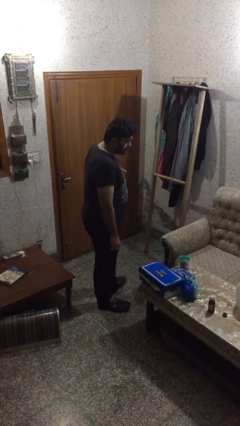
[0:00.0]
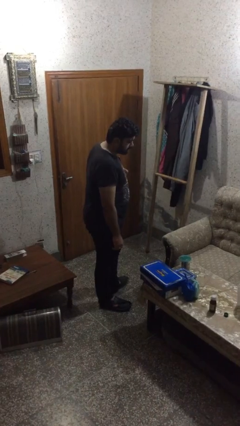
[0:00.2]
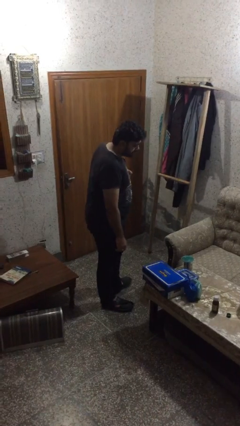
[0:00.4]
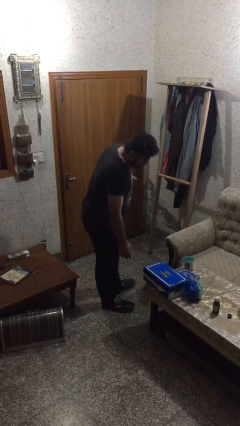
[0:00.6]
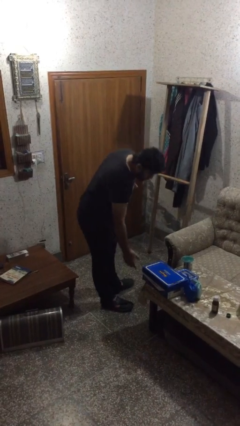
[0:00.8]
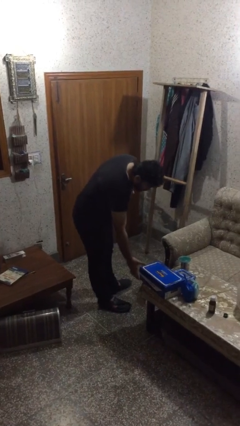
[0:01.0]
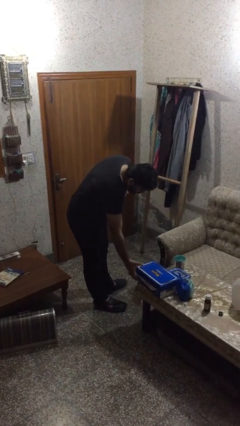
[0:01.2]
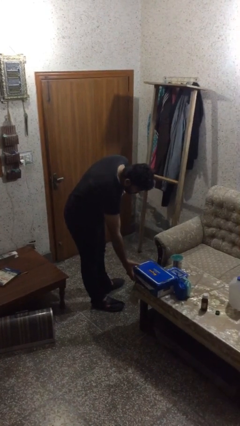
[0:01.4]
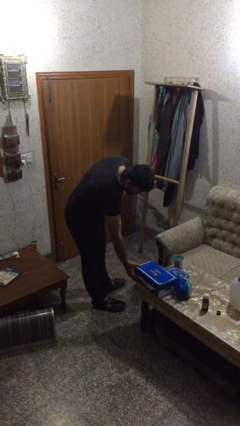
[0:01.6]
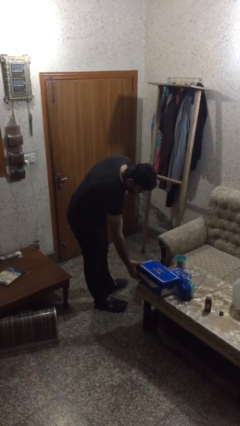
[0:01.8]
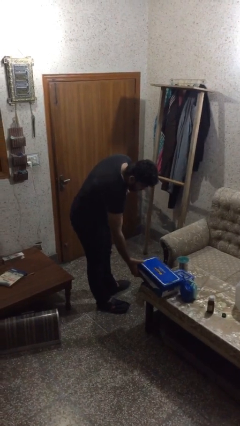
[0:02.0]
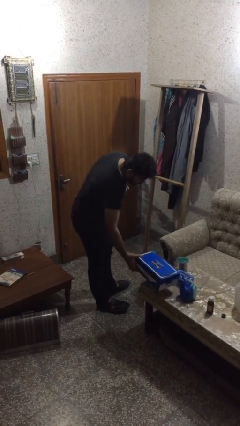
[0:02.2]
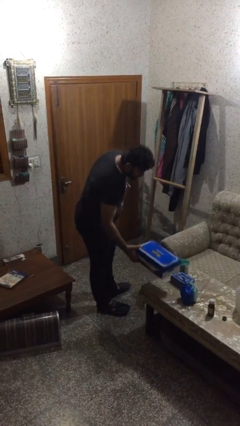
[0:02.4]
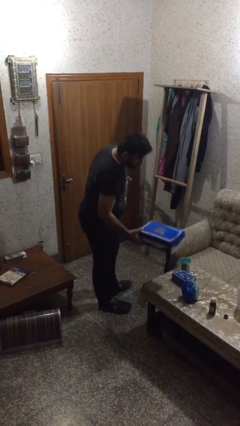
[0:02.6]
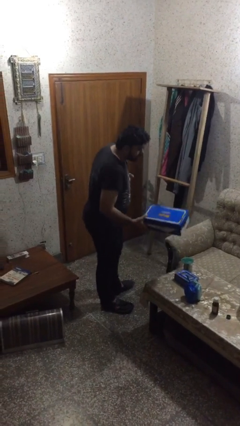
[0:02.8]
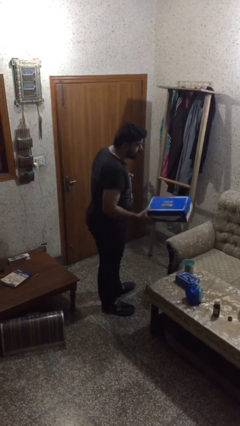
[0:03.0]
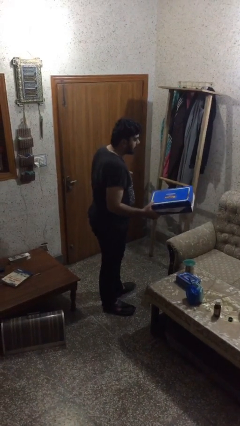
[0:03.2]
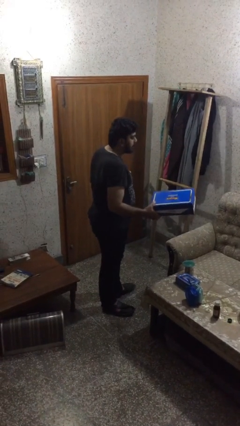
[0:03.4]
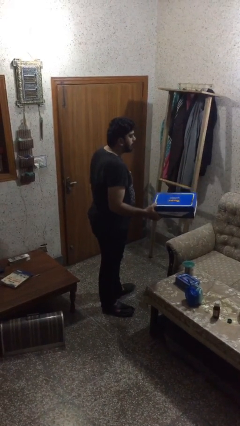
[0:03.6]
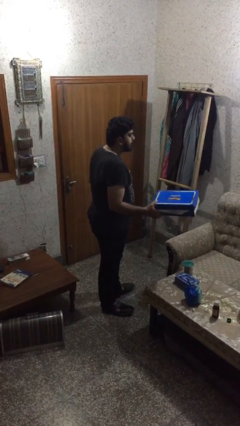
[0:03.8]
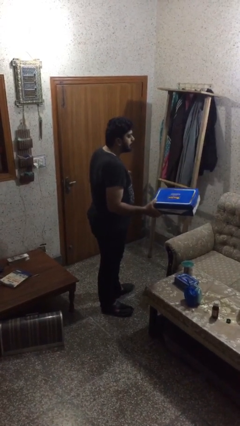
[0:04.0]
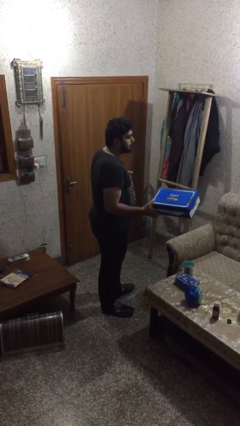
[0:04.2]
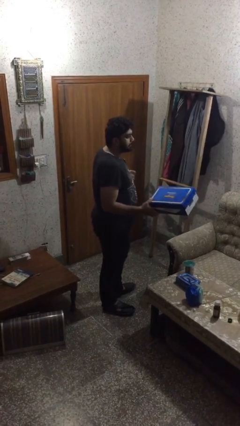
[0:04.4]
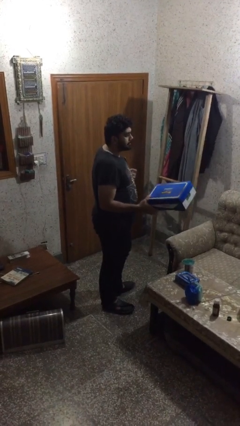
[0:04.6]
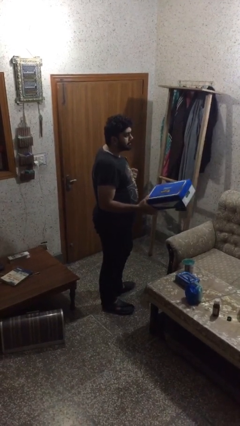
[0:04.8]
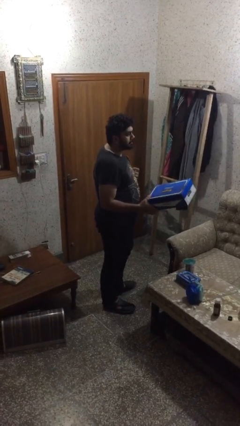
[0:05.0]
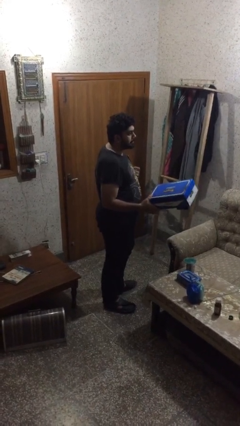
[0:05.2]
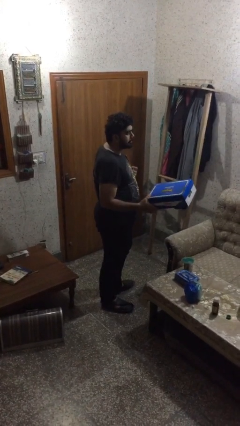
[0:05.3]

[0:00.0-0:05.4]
person picks up object from table

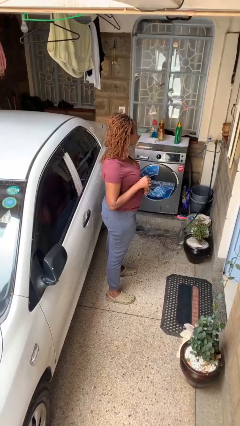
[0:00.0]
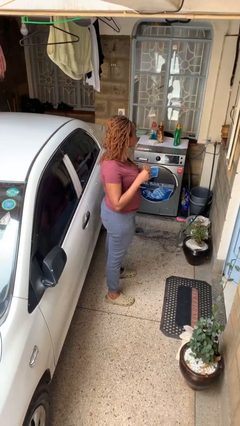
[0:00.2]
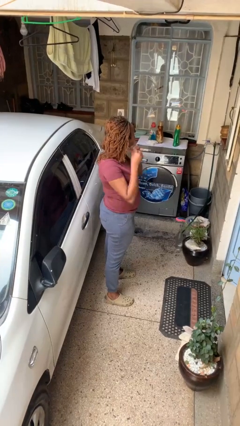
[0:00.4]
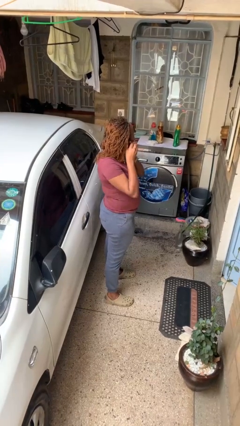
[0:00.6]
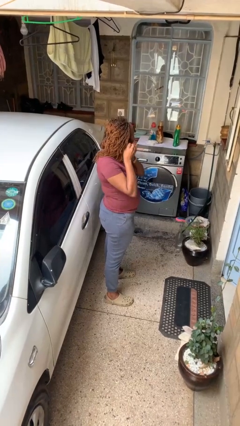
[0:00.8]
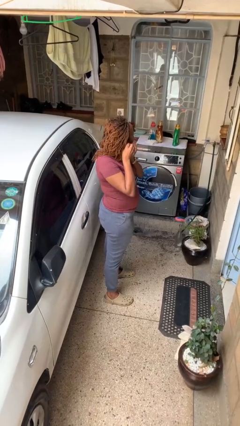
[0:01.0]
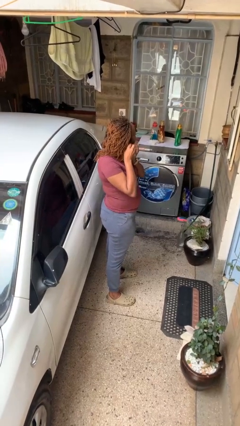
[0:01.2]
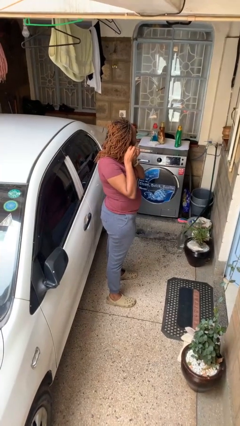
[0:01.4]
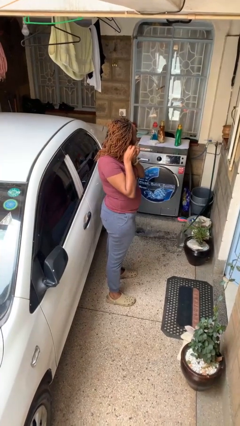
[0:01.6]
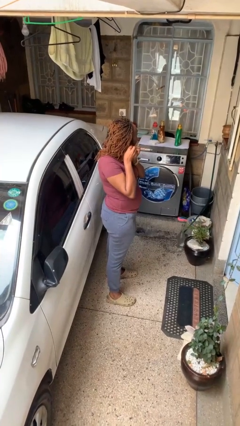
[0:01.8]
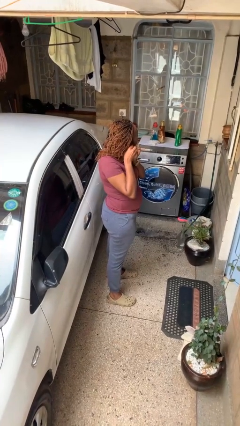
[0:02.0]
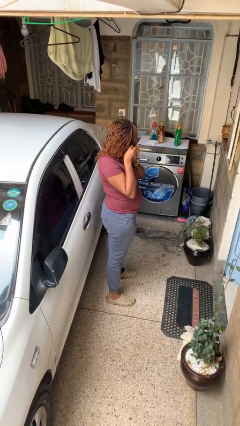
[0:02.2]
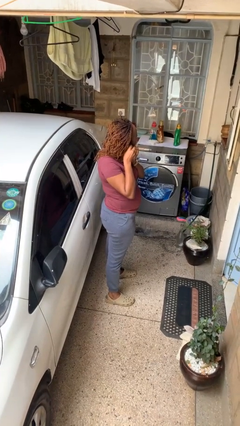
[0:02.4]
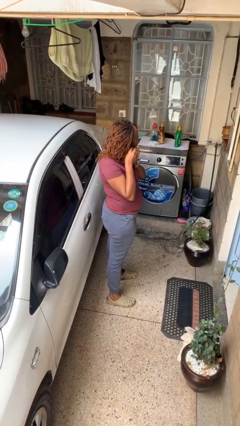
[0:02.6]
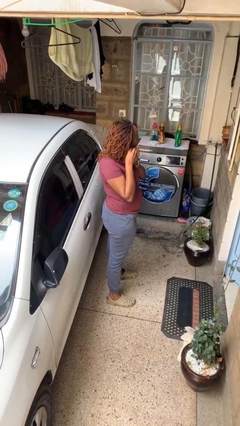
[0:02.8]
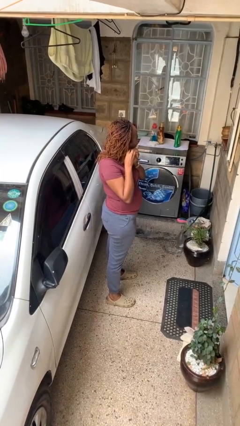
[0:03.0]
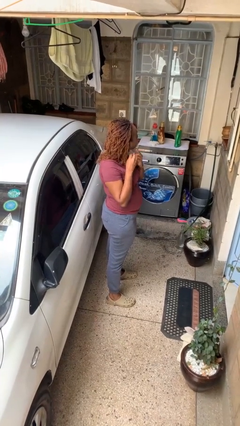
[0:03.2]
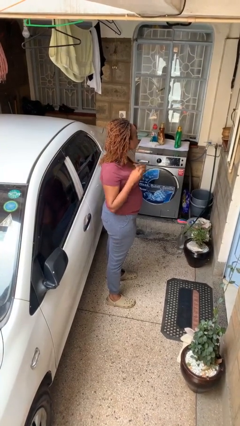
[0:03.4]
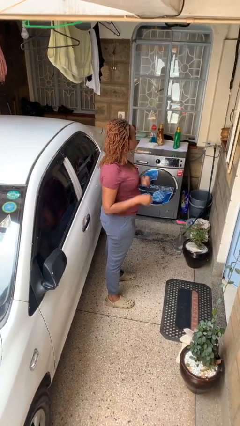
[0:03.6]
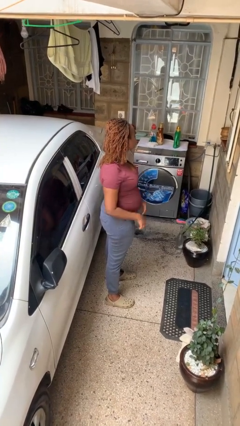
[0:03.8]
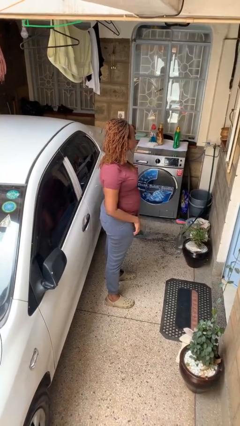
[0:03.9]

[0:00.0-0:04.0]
person puts on earrings

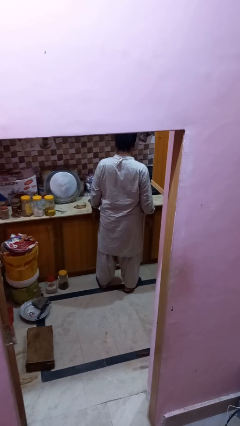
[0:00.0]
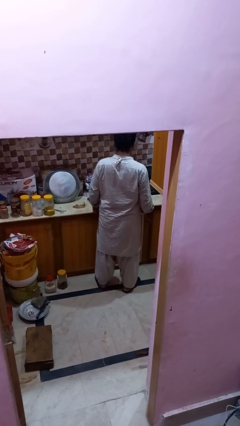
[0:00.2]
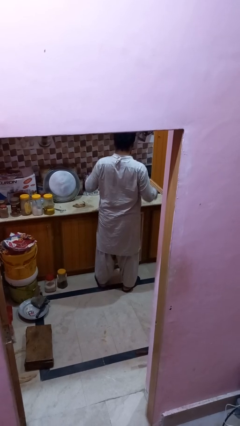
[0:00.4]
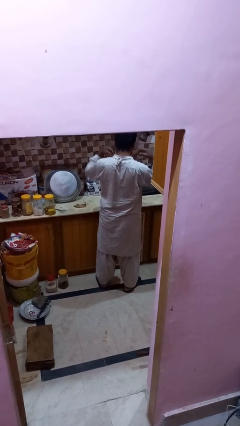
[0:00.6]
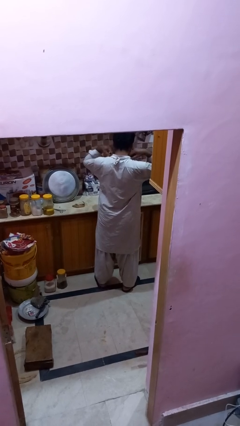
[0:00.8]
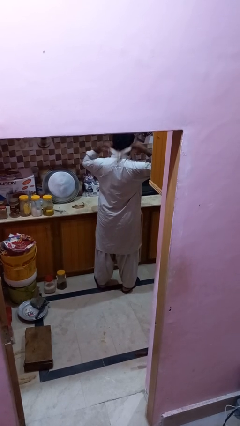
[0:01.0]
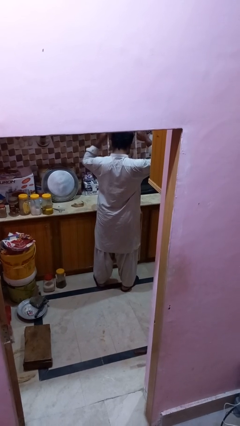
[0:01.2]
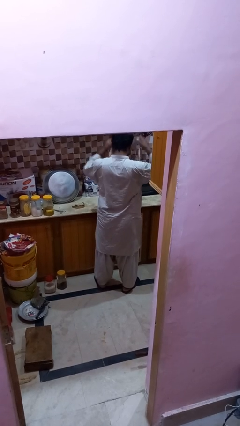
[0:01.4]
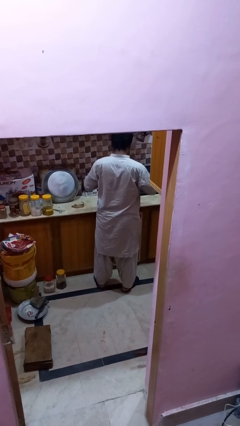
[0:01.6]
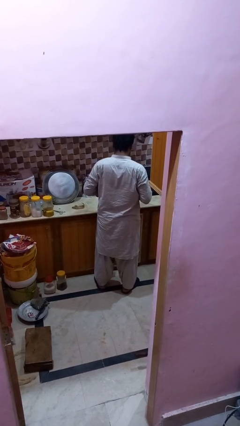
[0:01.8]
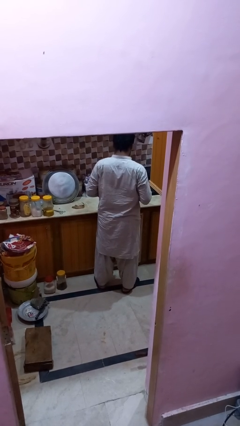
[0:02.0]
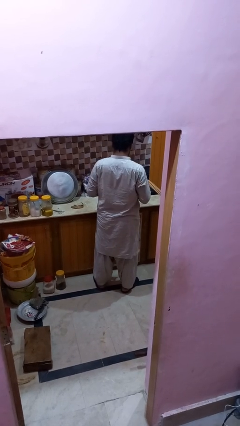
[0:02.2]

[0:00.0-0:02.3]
person takes off apron

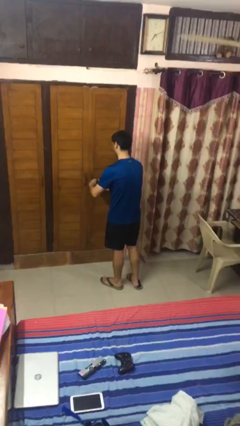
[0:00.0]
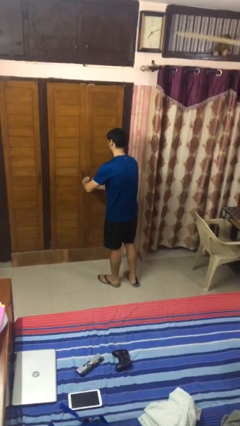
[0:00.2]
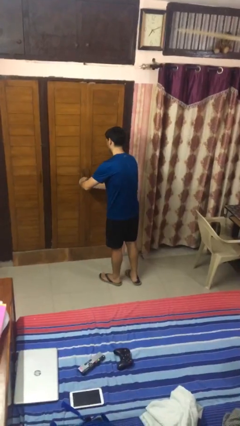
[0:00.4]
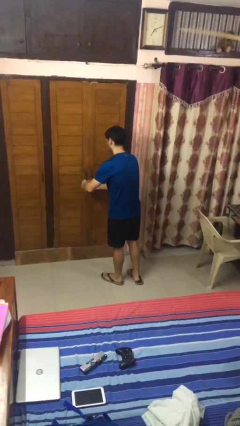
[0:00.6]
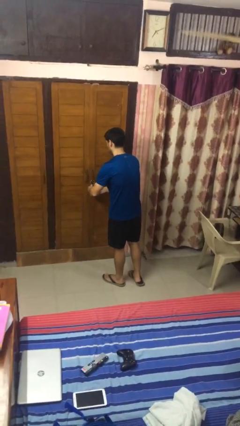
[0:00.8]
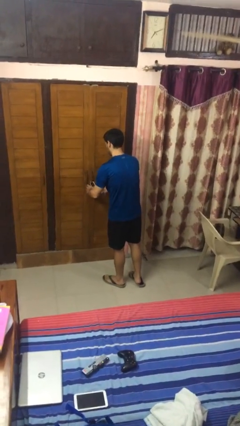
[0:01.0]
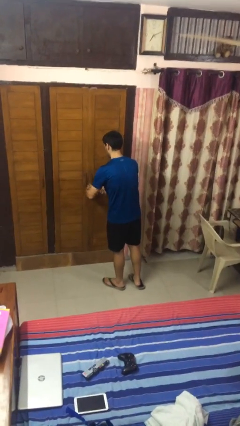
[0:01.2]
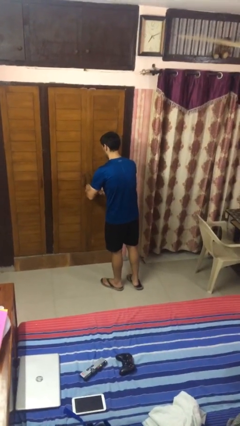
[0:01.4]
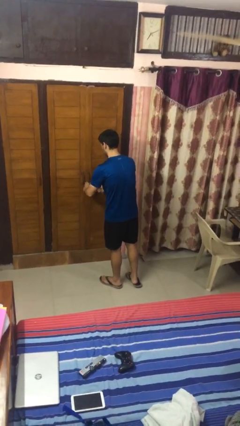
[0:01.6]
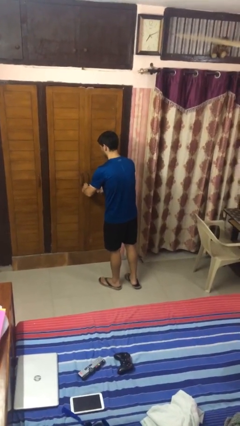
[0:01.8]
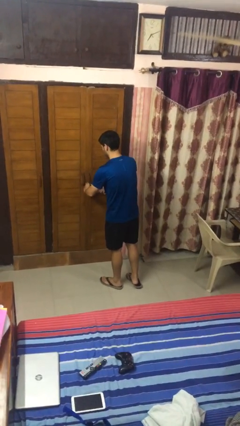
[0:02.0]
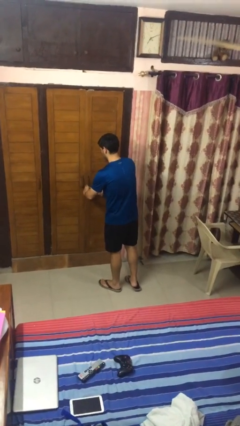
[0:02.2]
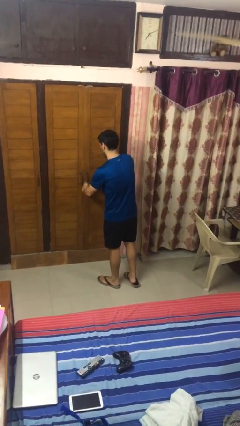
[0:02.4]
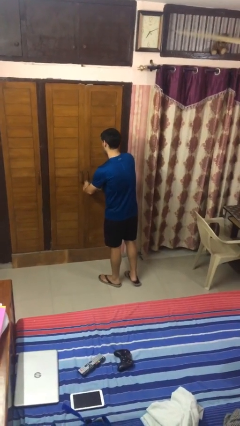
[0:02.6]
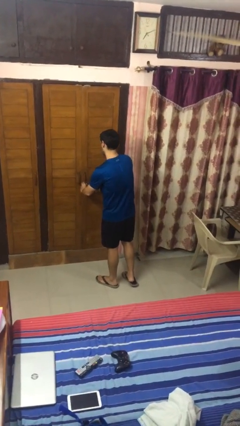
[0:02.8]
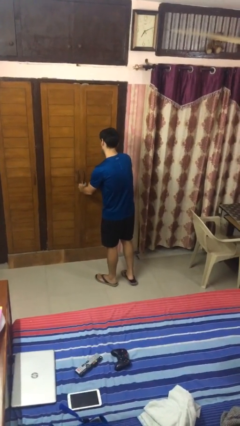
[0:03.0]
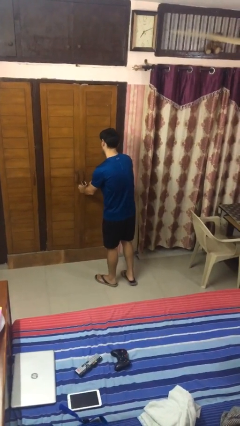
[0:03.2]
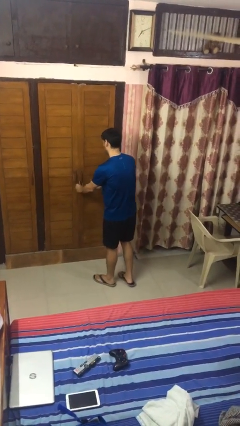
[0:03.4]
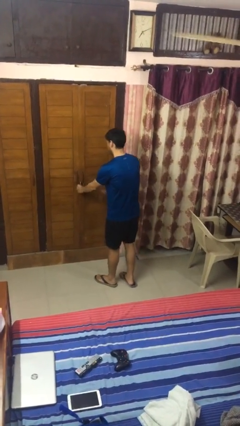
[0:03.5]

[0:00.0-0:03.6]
person locks door with keys

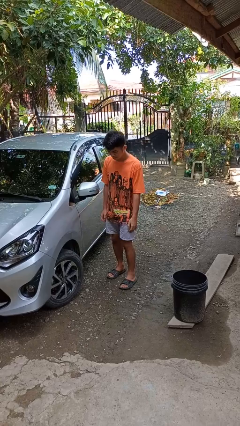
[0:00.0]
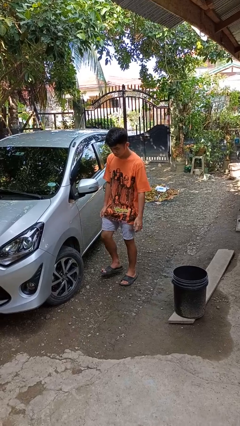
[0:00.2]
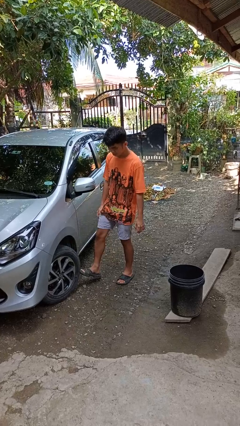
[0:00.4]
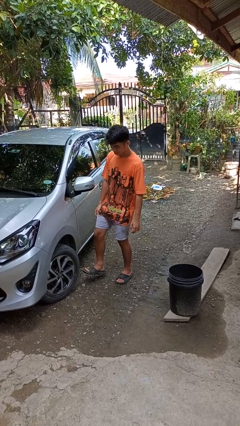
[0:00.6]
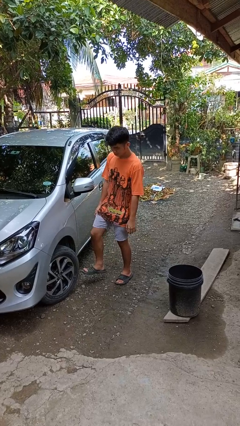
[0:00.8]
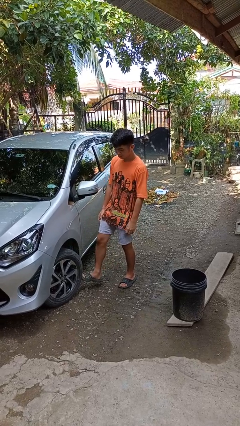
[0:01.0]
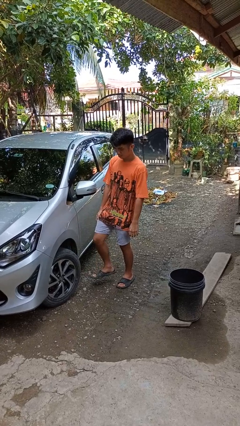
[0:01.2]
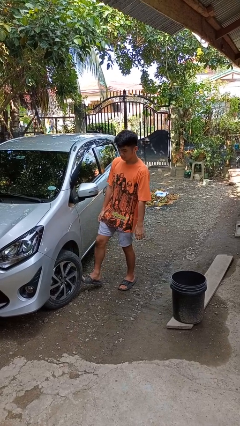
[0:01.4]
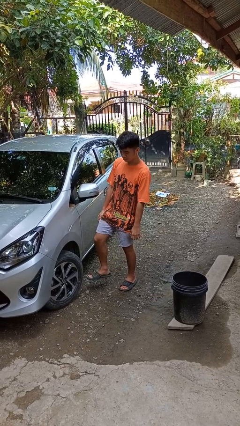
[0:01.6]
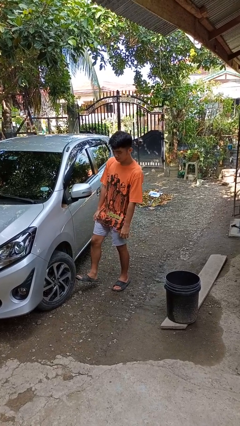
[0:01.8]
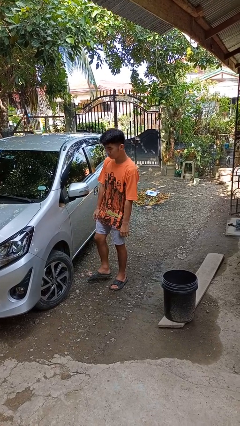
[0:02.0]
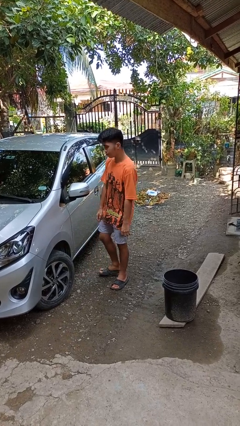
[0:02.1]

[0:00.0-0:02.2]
person kicks car tires
